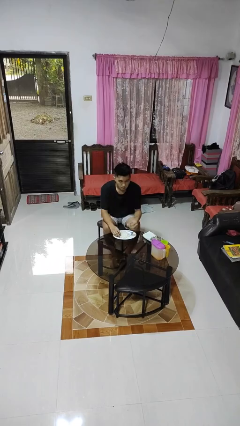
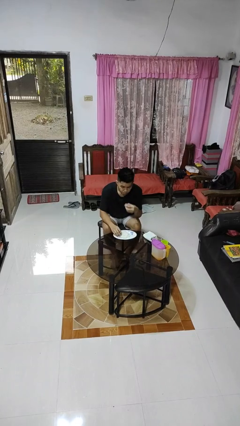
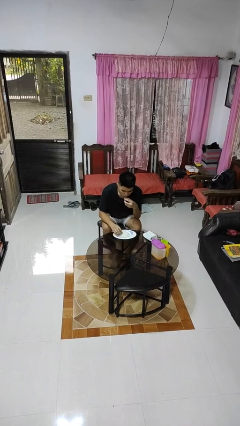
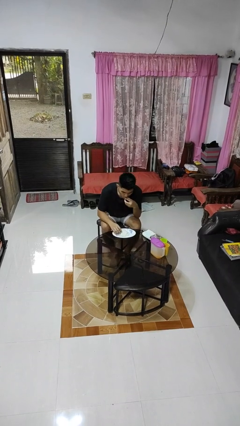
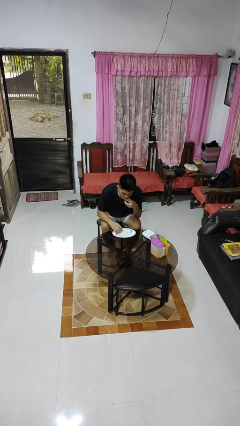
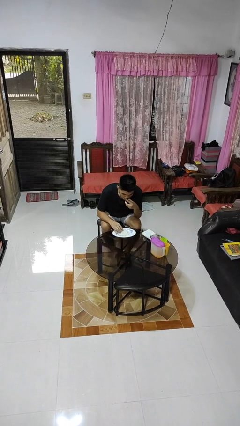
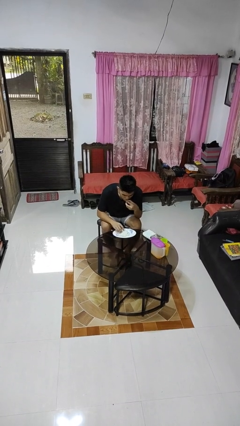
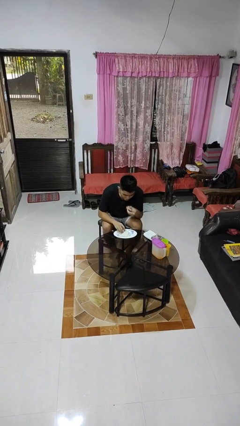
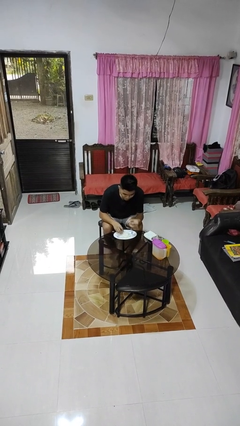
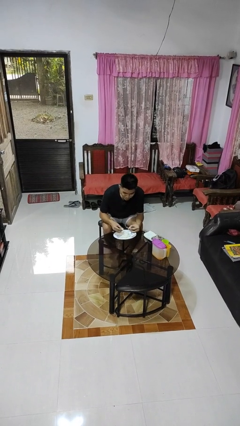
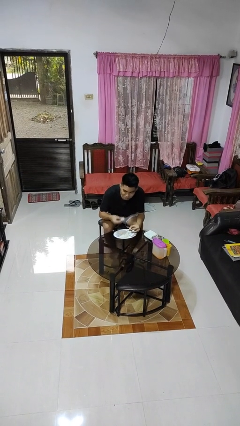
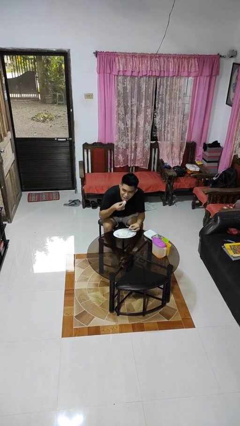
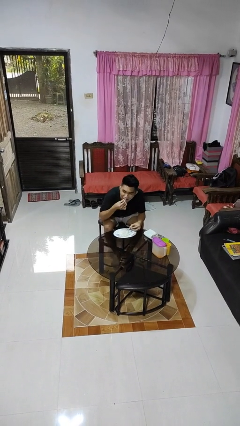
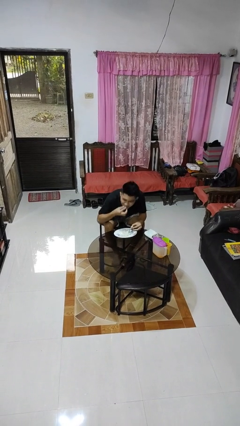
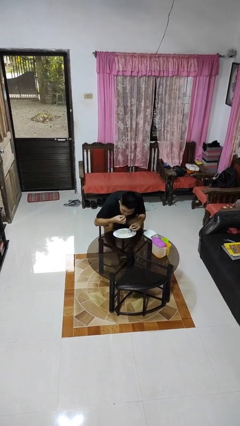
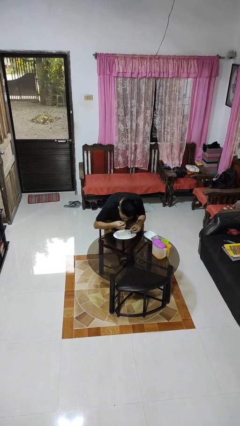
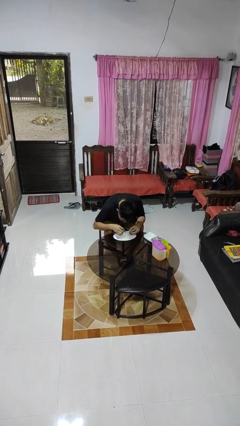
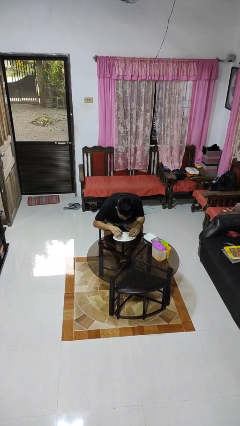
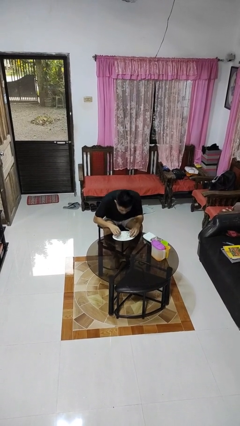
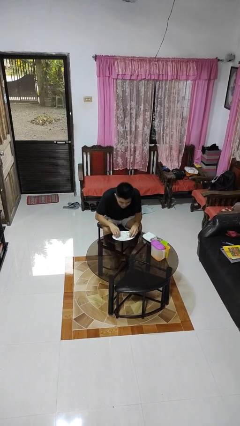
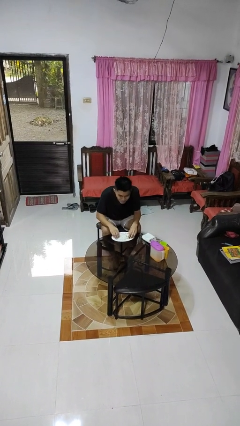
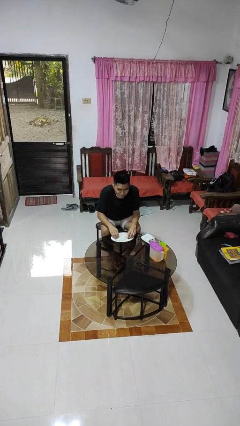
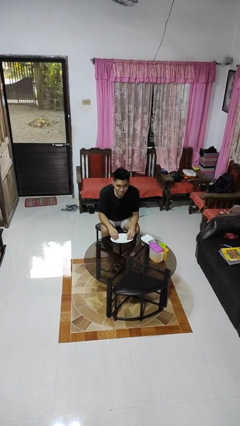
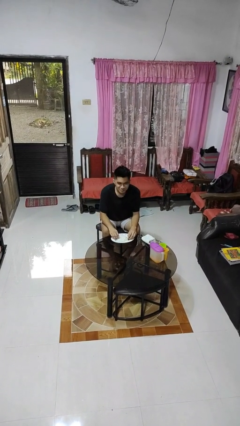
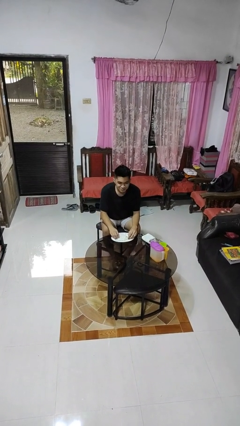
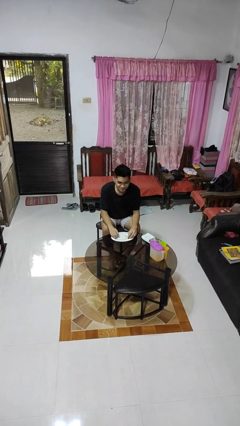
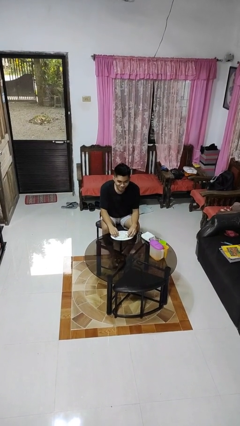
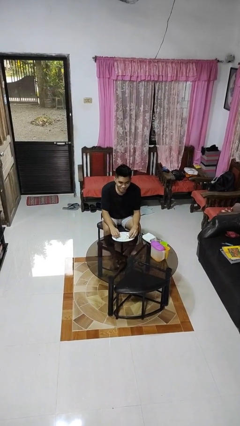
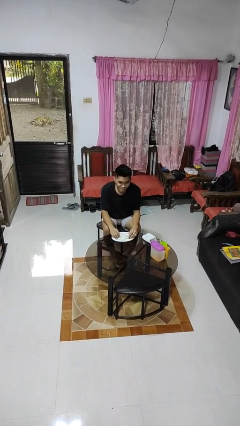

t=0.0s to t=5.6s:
person eats with hands

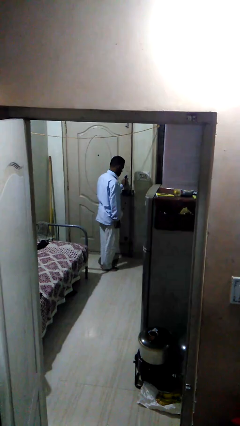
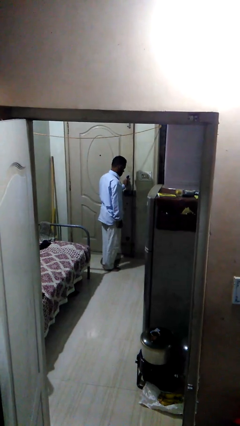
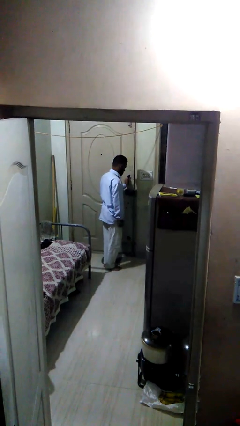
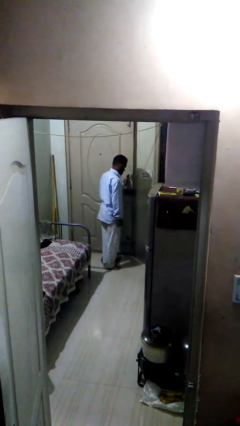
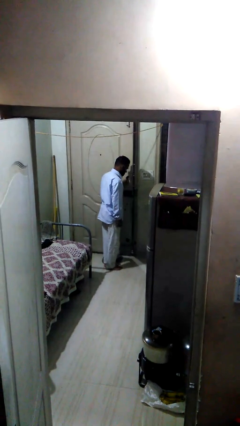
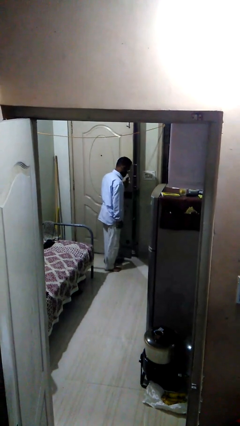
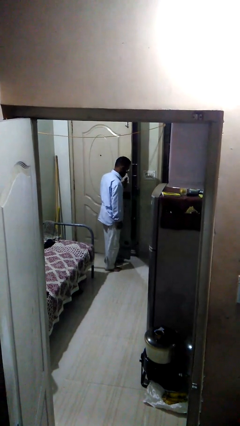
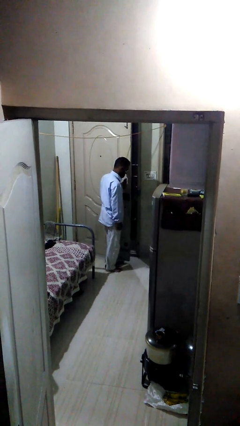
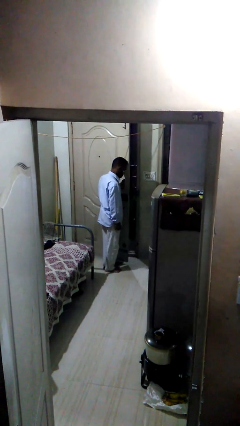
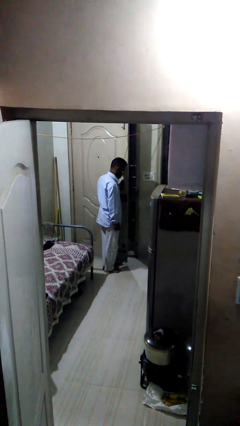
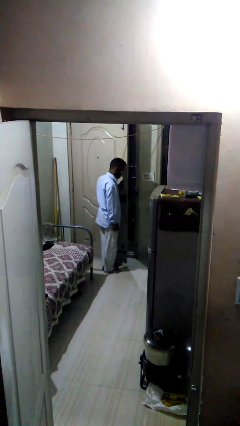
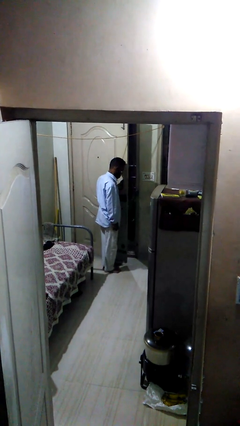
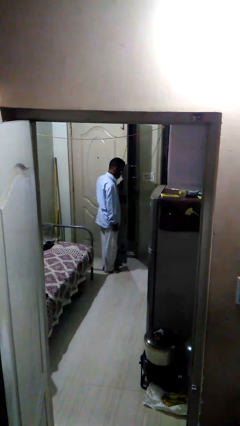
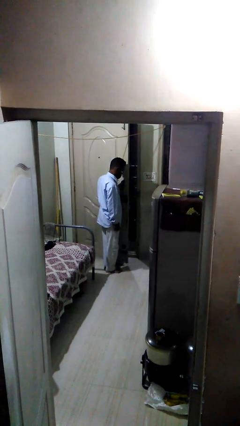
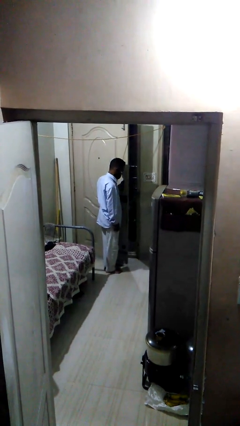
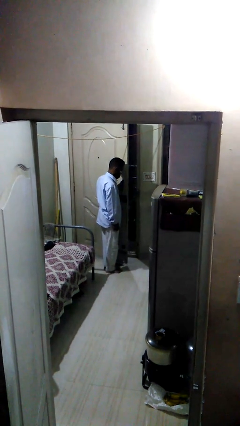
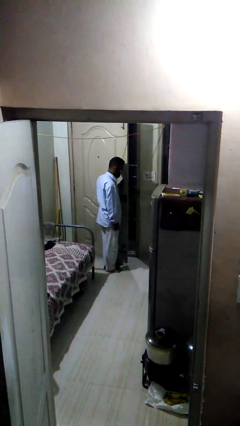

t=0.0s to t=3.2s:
person opens facility door

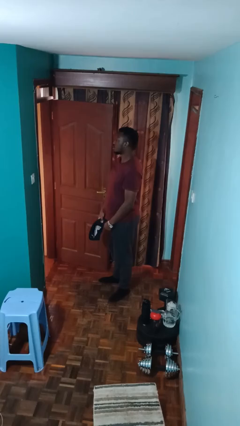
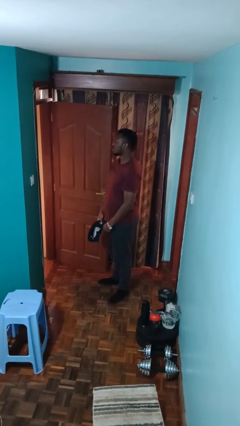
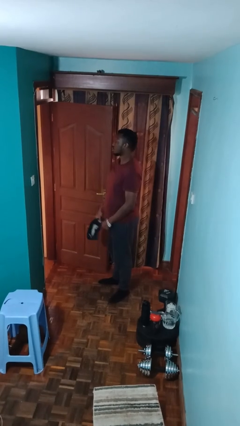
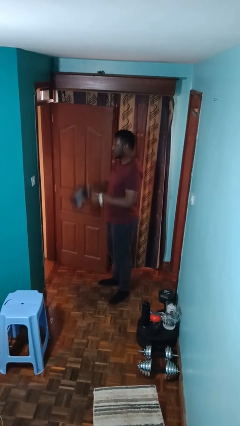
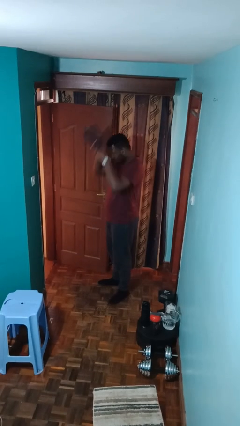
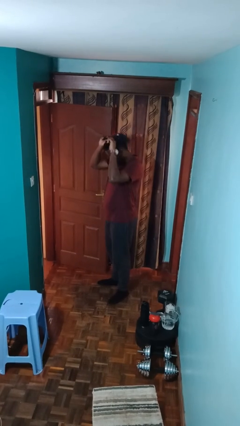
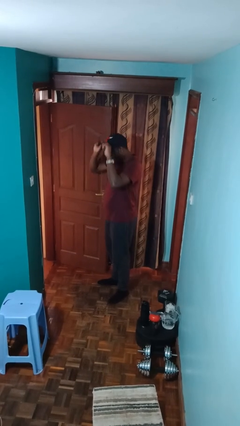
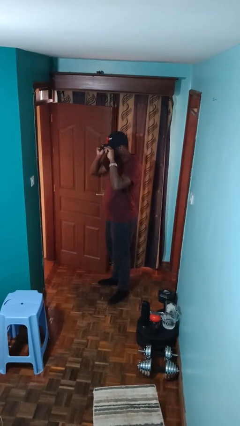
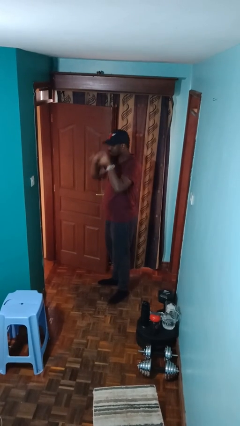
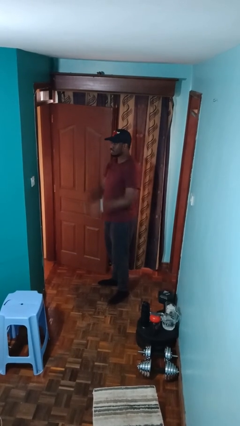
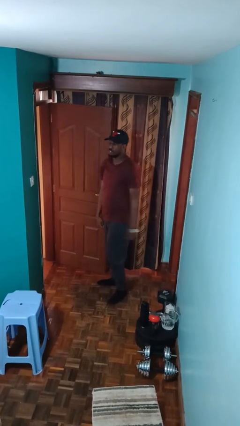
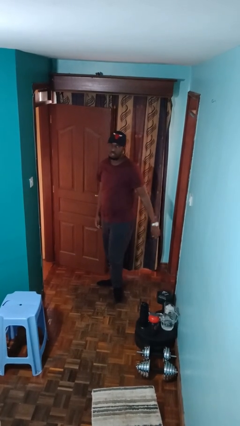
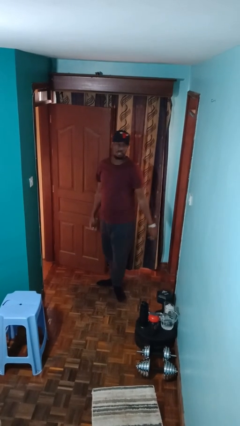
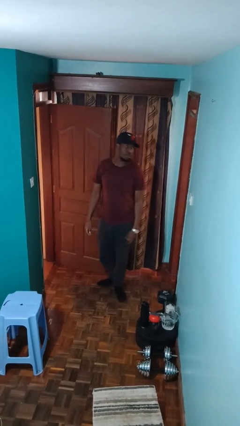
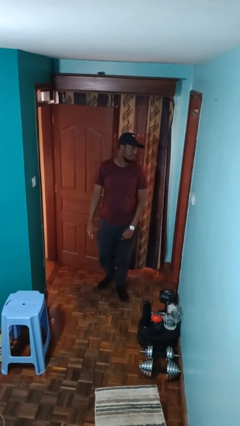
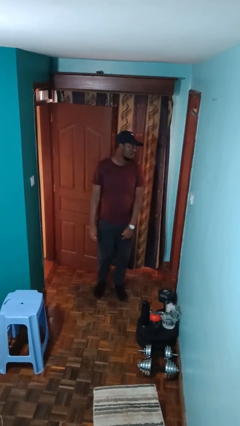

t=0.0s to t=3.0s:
person puts on hat

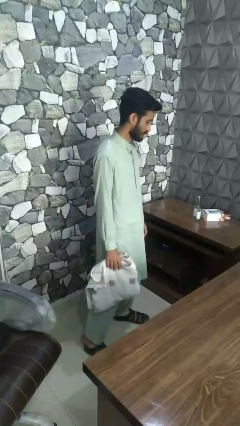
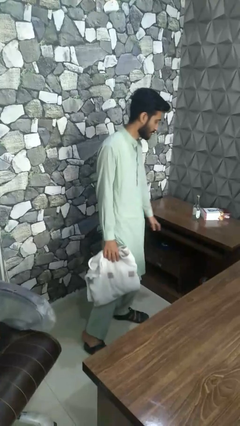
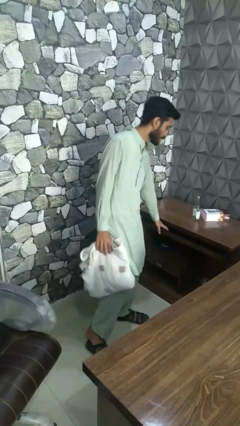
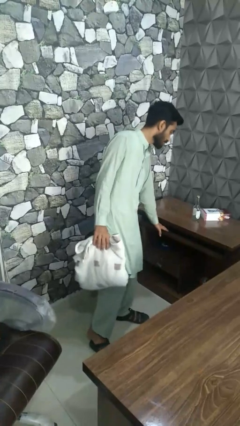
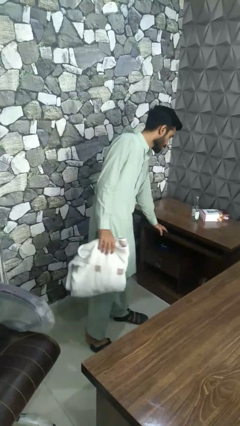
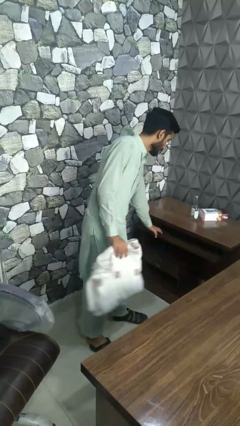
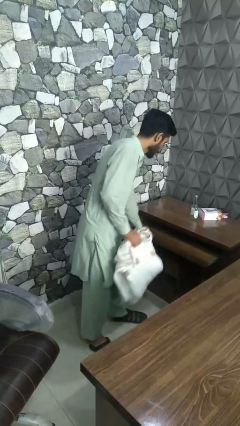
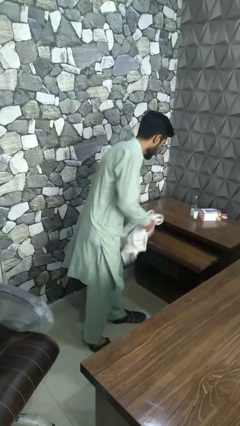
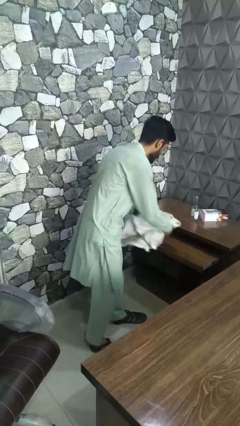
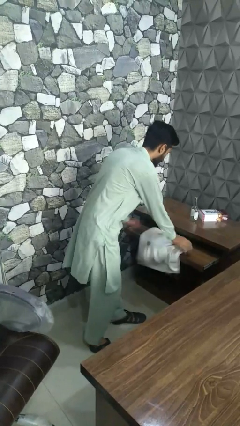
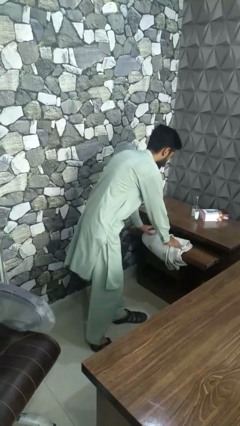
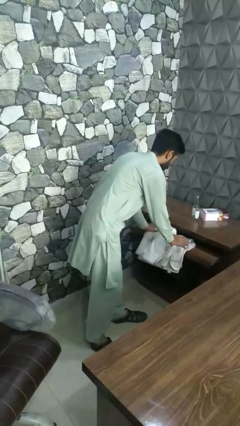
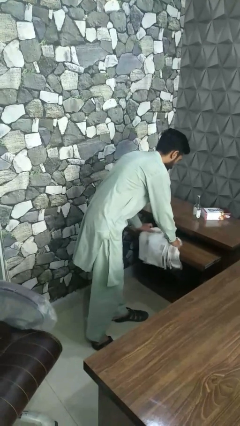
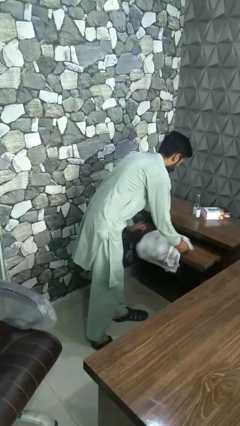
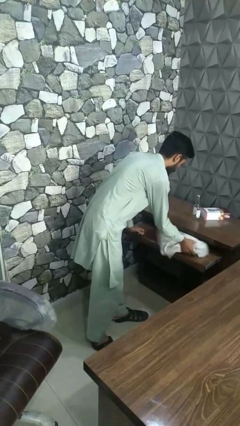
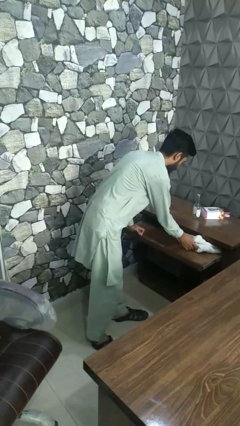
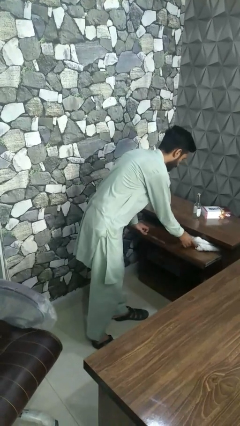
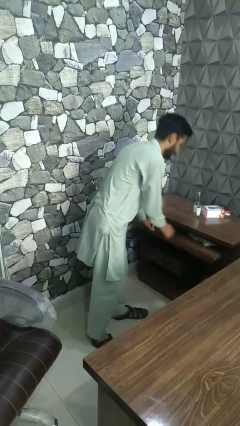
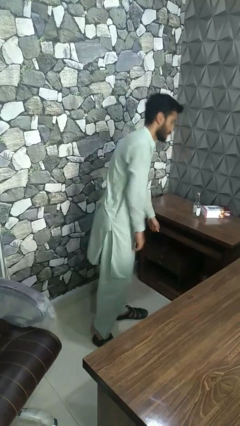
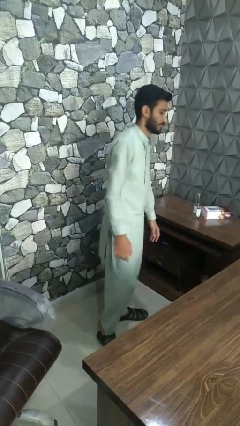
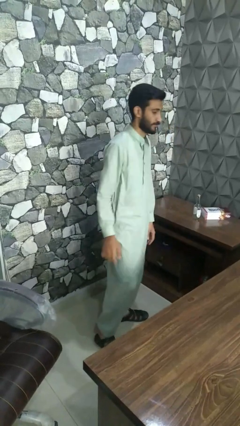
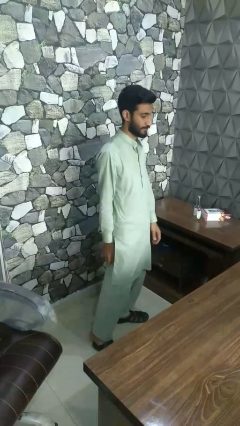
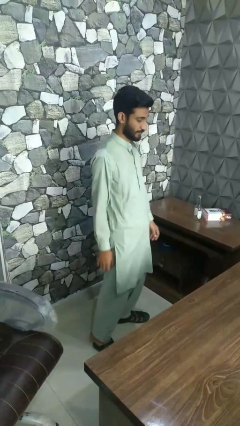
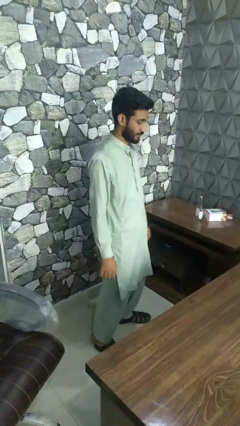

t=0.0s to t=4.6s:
person puts clothes into dresser

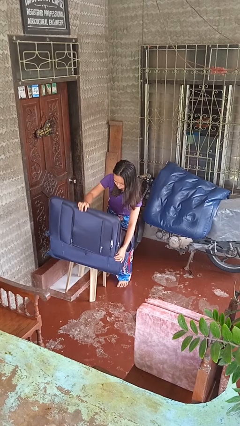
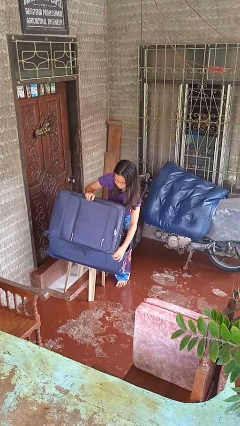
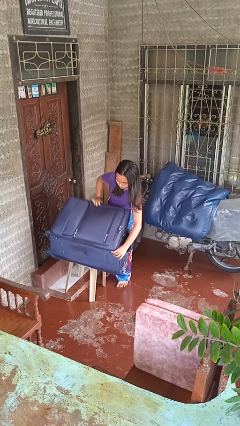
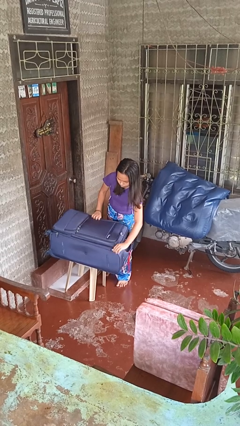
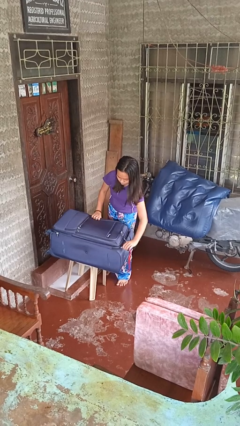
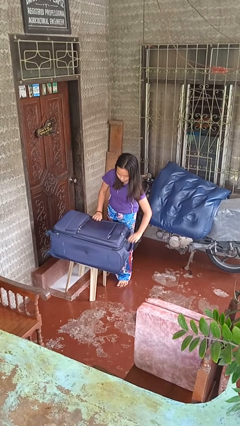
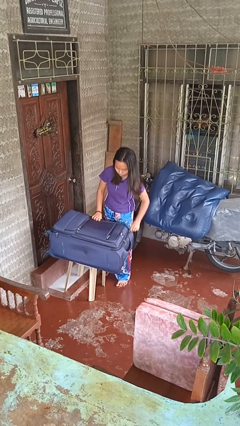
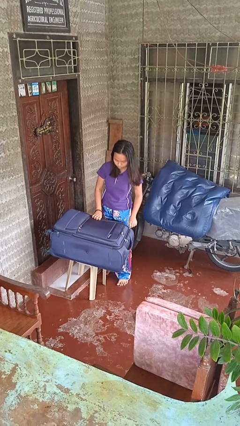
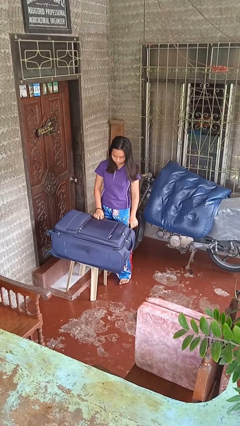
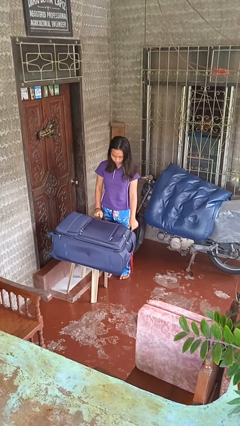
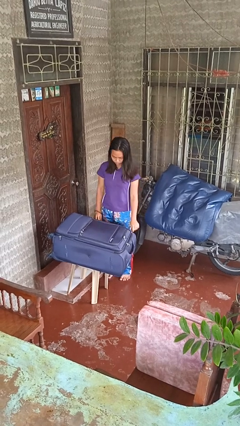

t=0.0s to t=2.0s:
person closes suitcase
